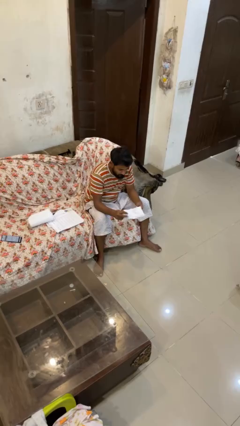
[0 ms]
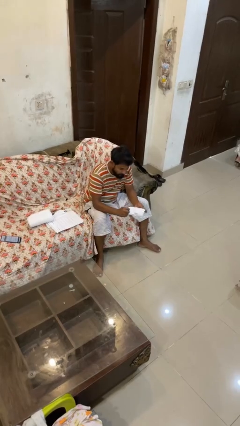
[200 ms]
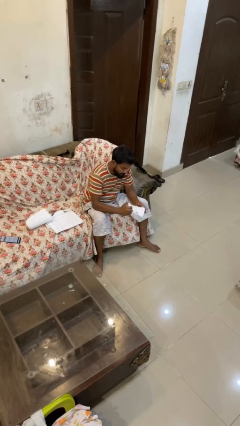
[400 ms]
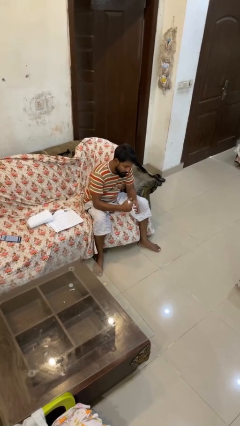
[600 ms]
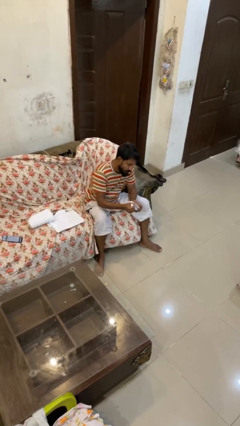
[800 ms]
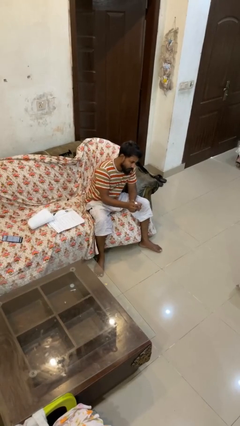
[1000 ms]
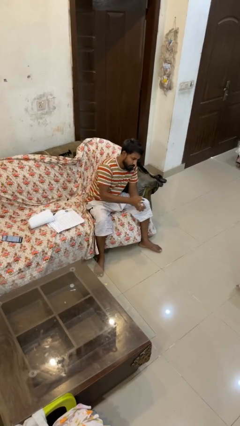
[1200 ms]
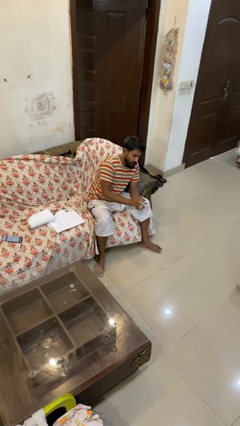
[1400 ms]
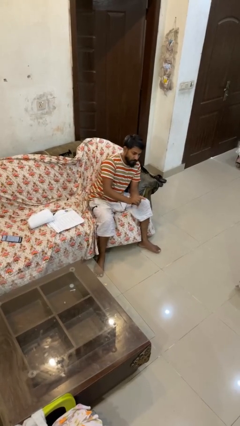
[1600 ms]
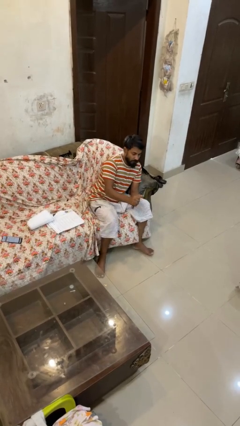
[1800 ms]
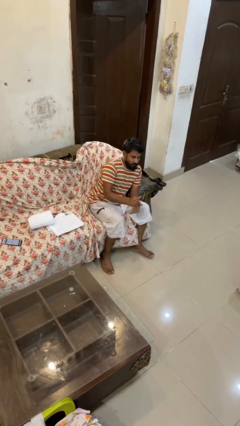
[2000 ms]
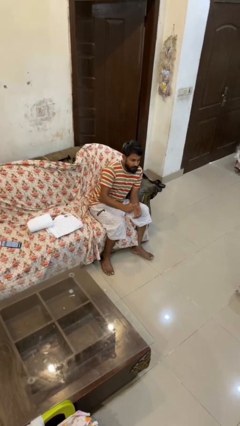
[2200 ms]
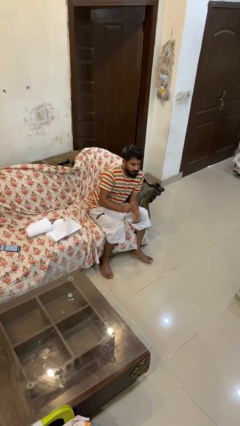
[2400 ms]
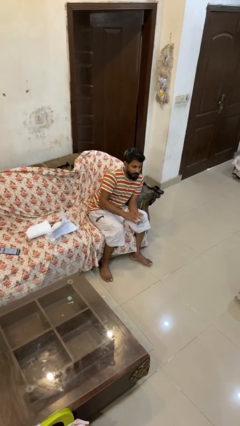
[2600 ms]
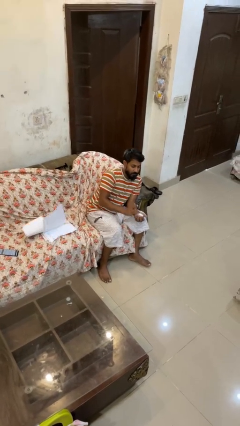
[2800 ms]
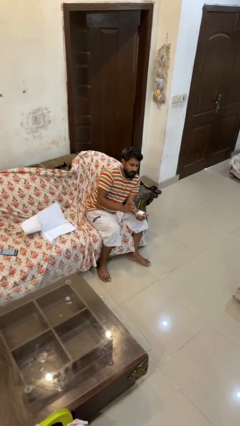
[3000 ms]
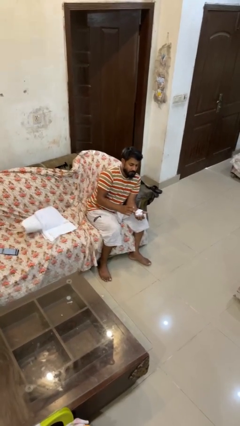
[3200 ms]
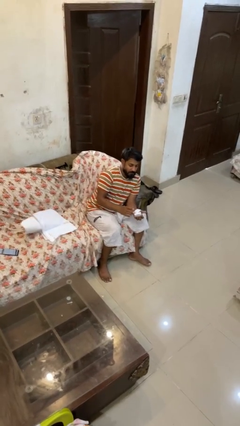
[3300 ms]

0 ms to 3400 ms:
person crumples paper

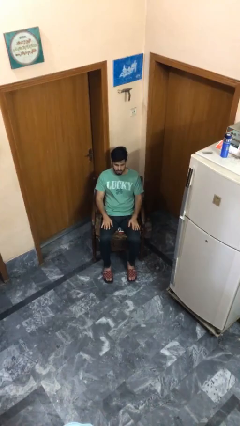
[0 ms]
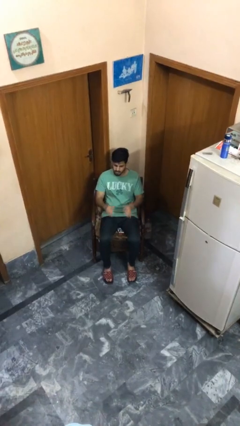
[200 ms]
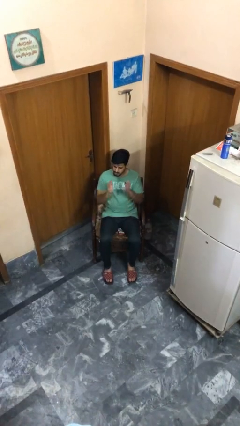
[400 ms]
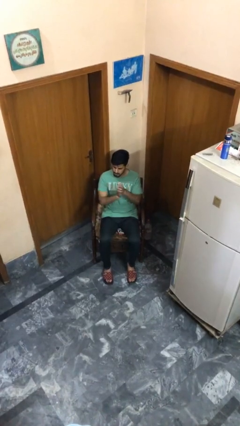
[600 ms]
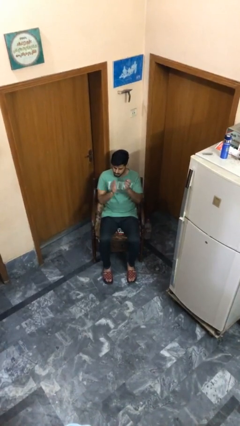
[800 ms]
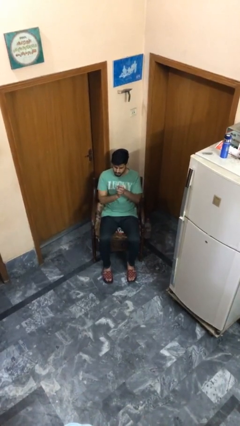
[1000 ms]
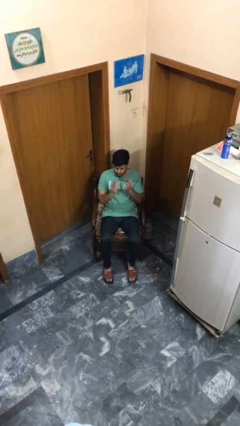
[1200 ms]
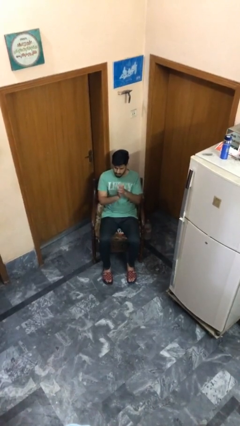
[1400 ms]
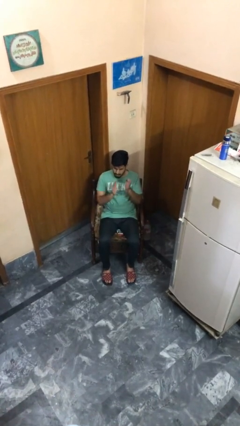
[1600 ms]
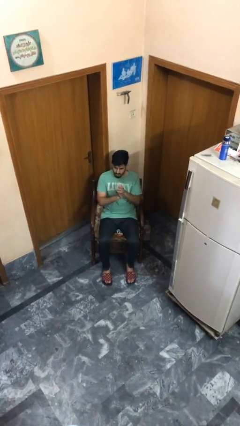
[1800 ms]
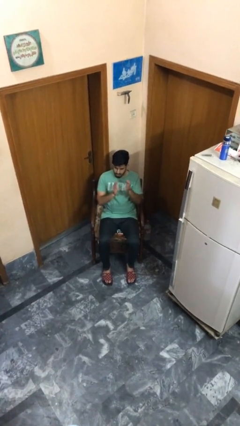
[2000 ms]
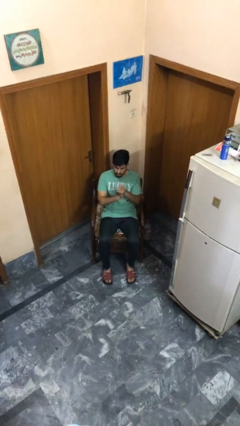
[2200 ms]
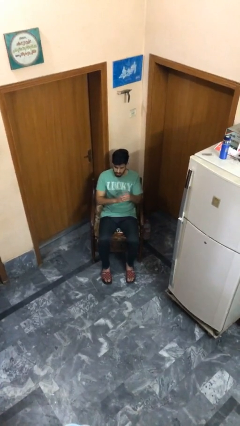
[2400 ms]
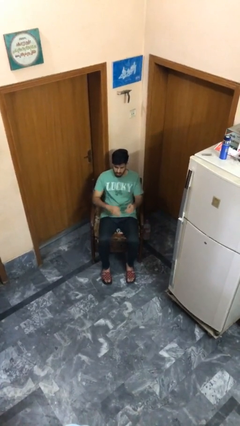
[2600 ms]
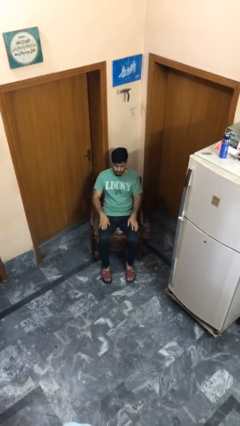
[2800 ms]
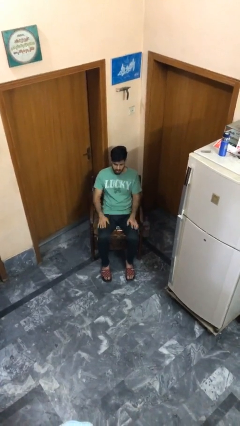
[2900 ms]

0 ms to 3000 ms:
person claps hands

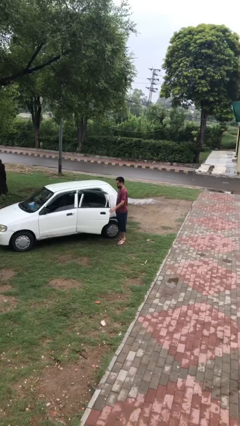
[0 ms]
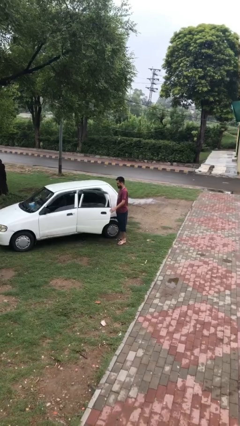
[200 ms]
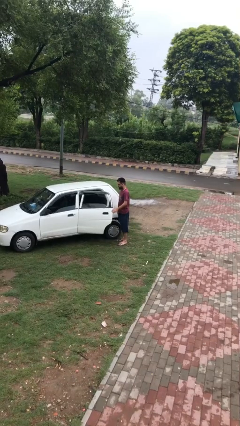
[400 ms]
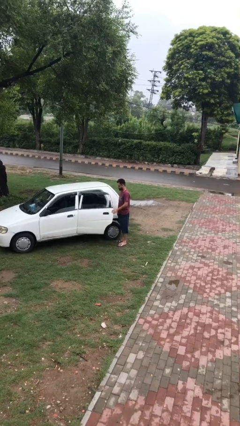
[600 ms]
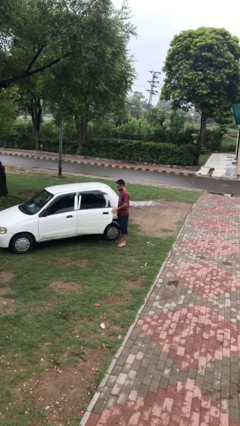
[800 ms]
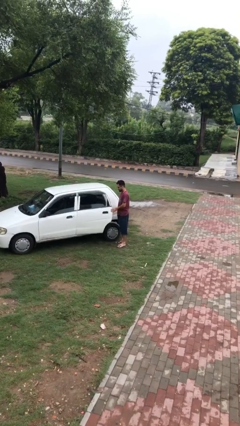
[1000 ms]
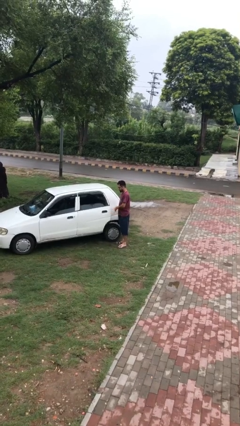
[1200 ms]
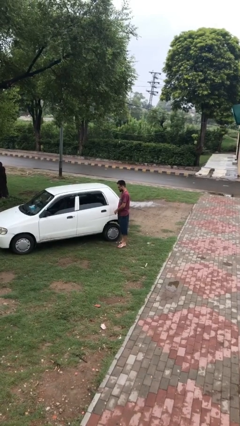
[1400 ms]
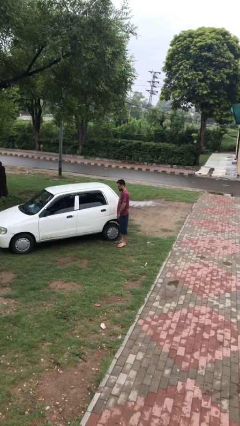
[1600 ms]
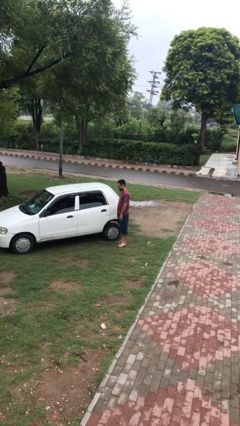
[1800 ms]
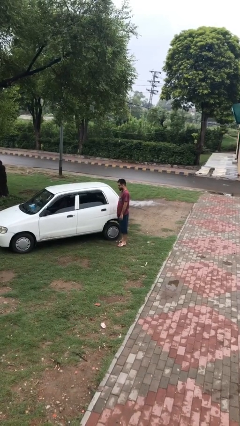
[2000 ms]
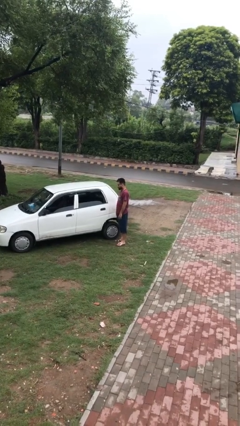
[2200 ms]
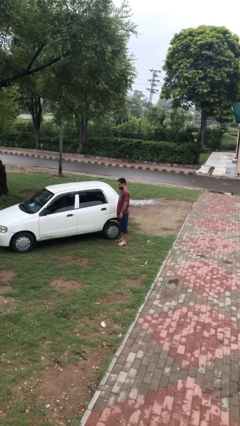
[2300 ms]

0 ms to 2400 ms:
person closes car door

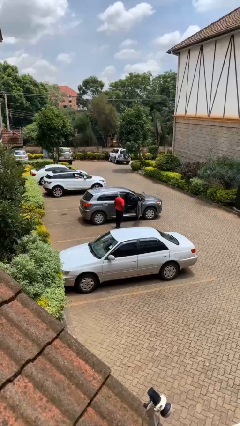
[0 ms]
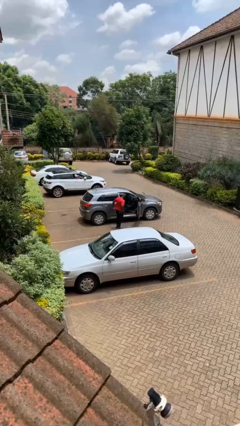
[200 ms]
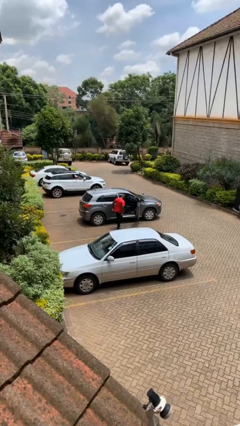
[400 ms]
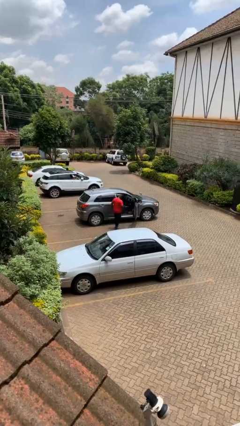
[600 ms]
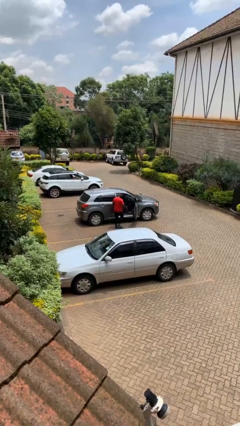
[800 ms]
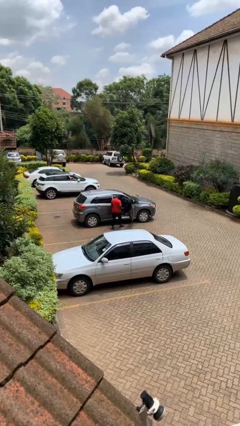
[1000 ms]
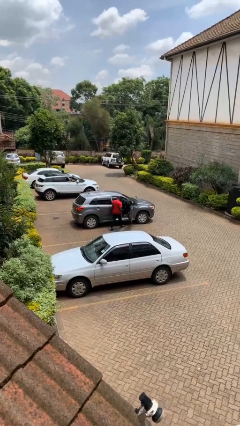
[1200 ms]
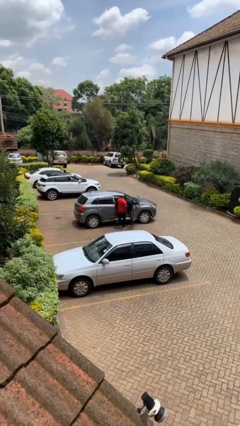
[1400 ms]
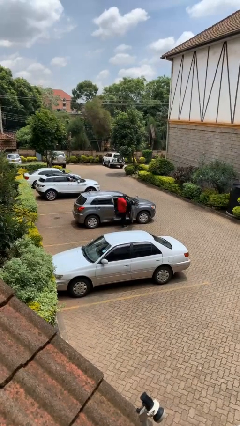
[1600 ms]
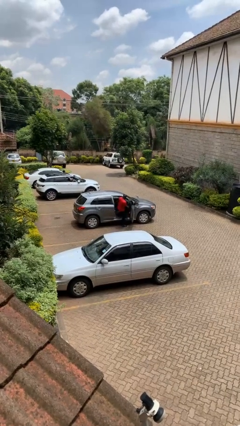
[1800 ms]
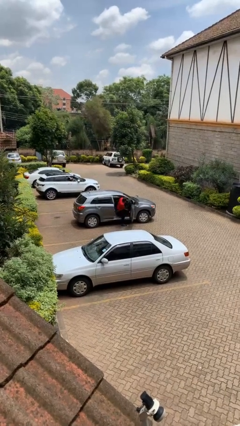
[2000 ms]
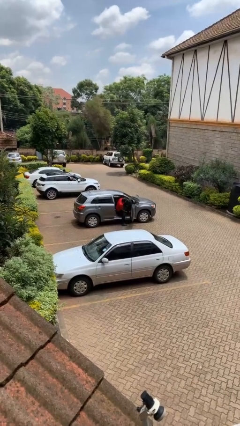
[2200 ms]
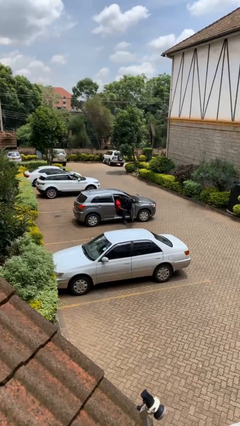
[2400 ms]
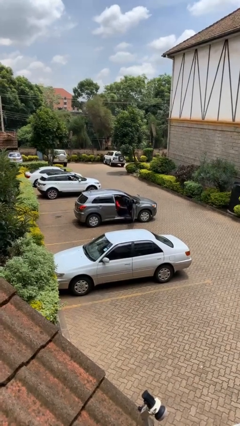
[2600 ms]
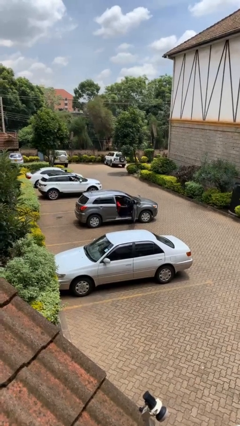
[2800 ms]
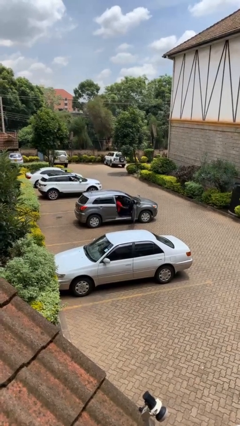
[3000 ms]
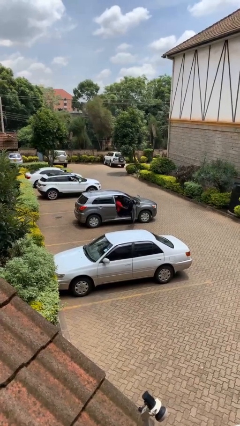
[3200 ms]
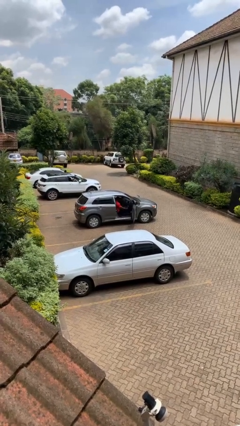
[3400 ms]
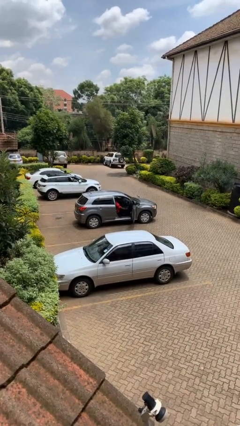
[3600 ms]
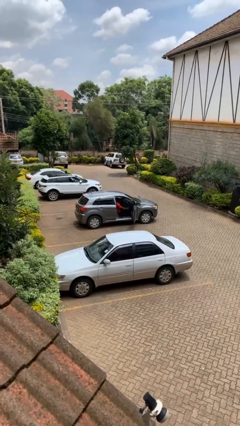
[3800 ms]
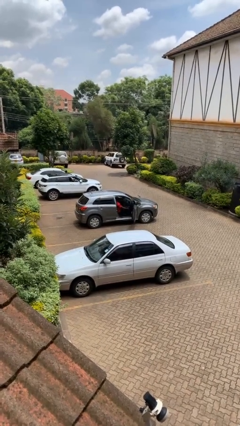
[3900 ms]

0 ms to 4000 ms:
person enters car

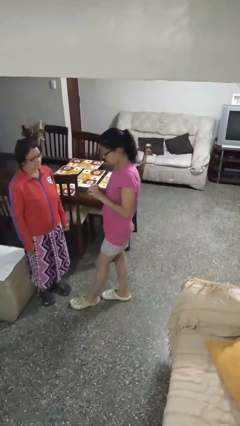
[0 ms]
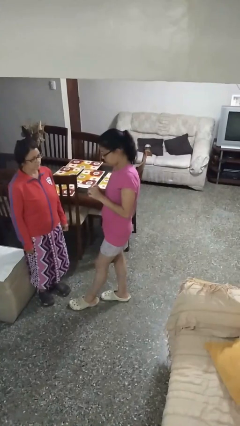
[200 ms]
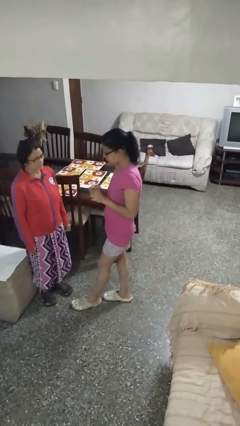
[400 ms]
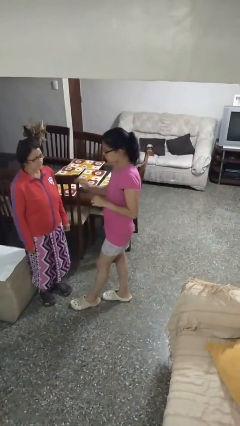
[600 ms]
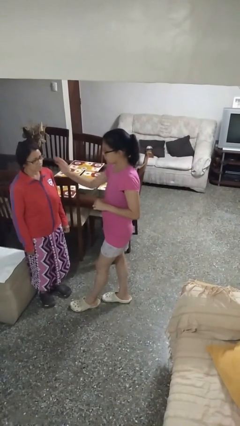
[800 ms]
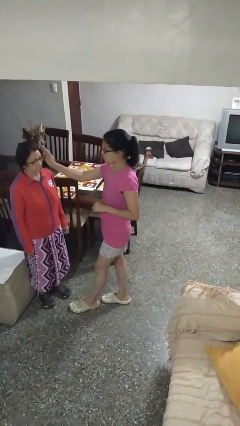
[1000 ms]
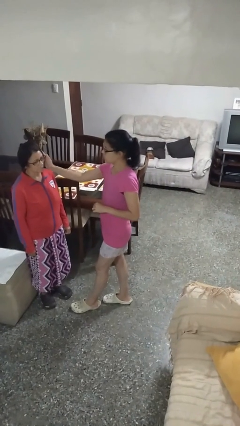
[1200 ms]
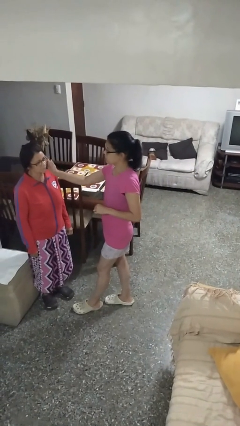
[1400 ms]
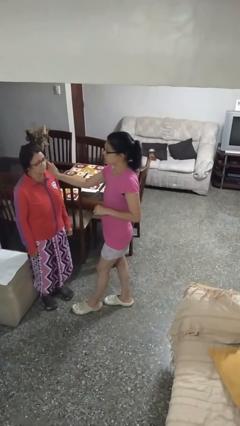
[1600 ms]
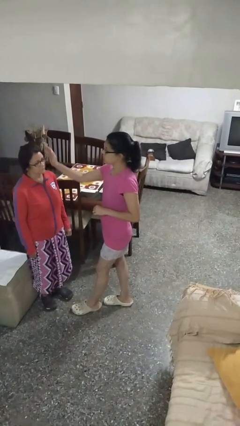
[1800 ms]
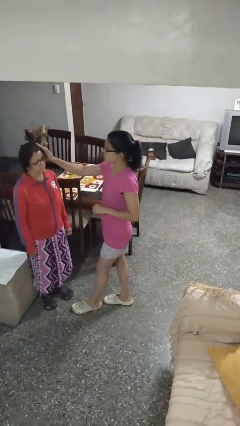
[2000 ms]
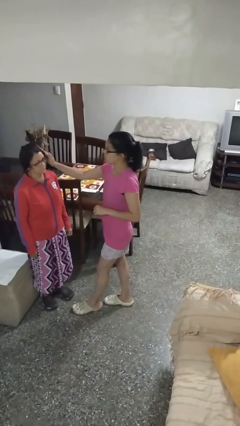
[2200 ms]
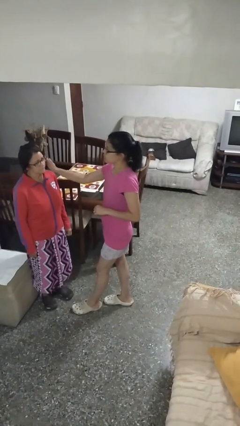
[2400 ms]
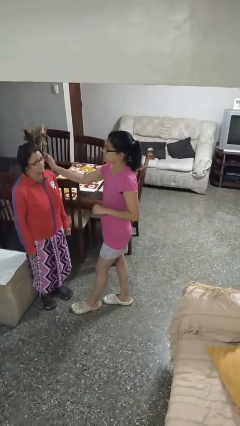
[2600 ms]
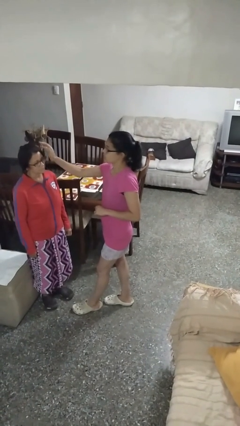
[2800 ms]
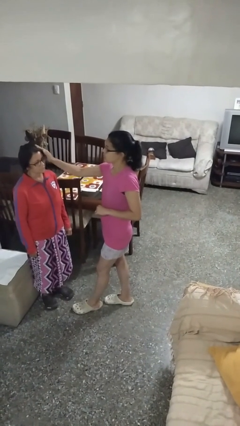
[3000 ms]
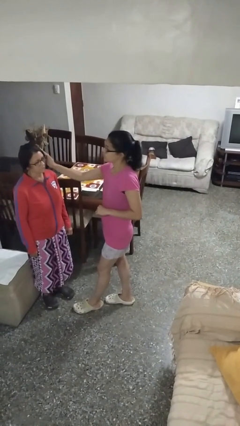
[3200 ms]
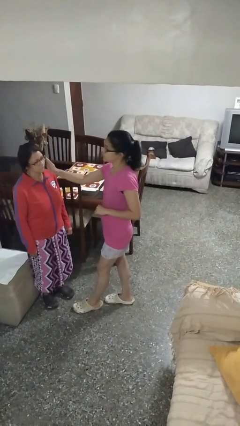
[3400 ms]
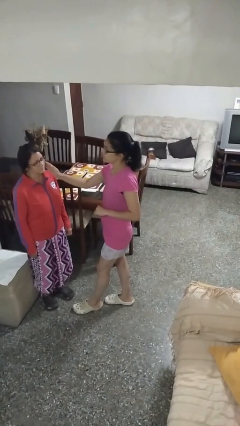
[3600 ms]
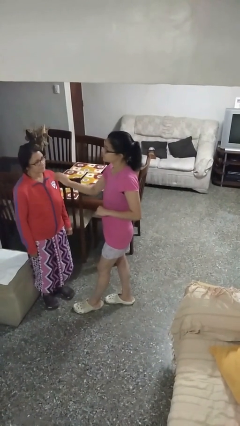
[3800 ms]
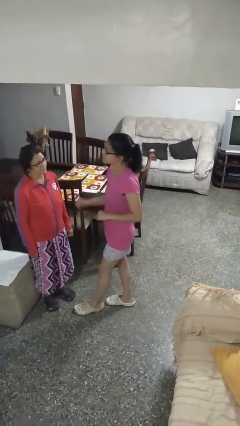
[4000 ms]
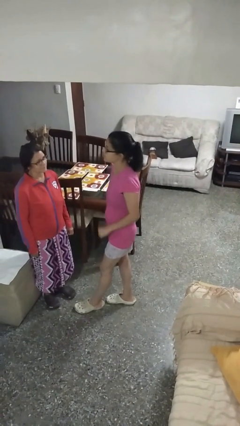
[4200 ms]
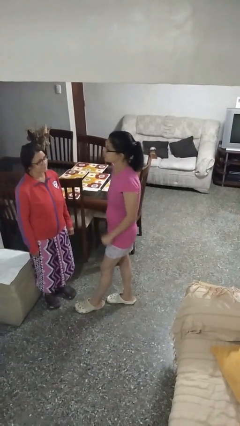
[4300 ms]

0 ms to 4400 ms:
person touches face of person

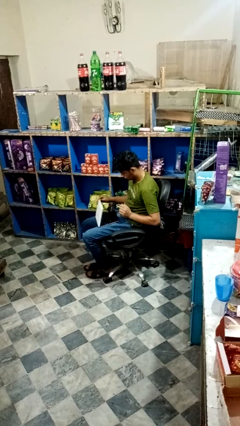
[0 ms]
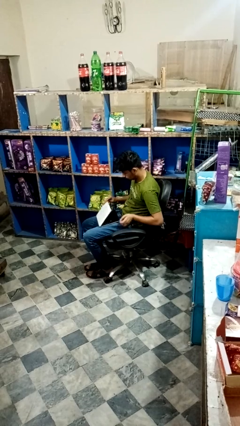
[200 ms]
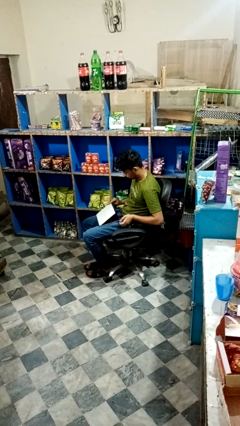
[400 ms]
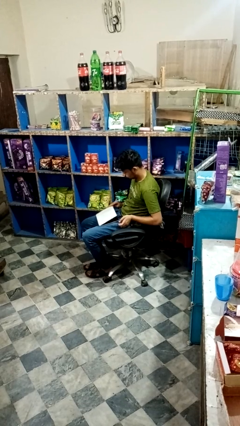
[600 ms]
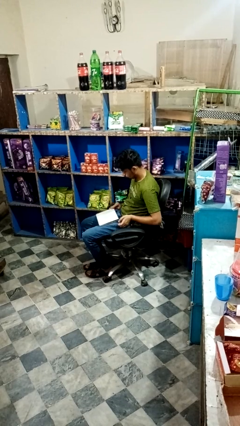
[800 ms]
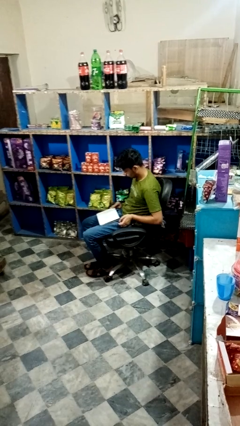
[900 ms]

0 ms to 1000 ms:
person closes laptop
